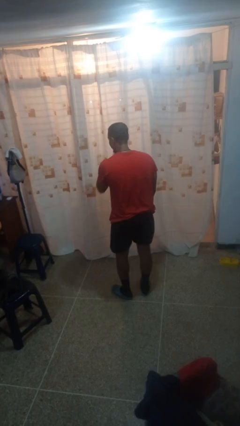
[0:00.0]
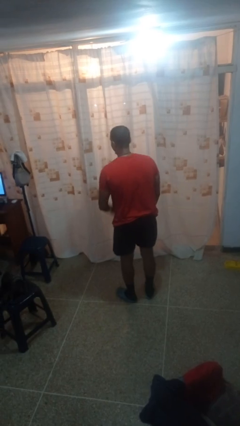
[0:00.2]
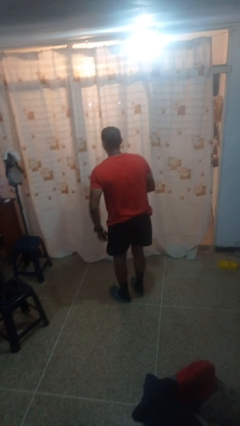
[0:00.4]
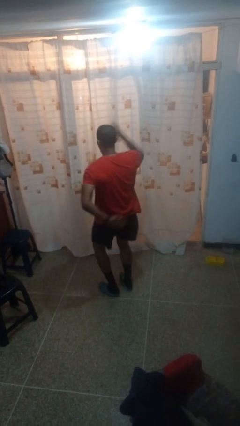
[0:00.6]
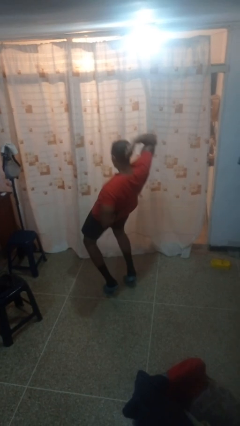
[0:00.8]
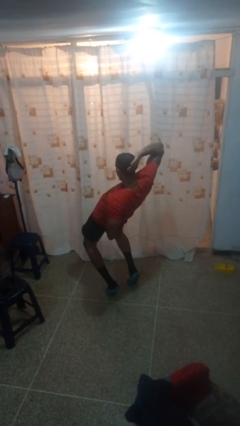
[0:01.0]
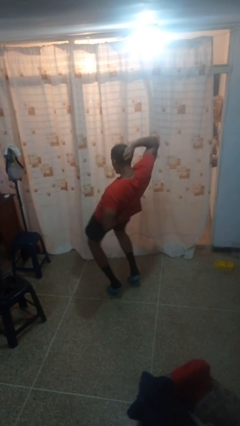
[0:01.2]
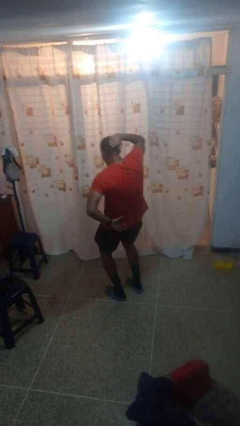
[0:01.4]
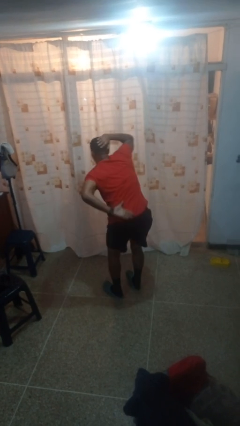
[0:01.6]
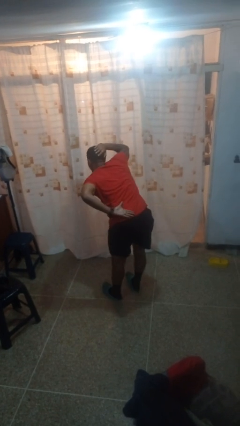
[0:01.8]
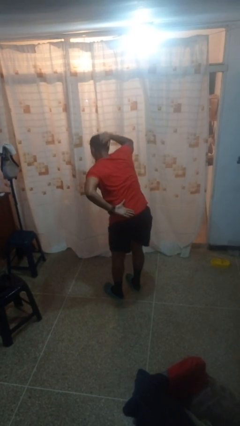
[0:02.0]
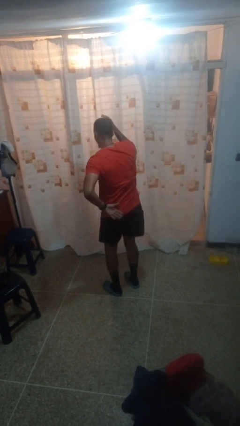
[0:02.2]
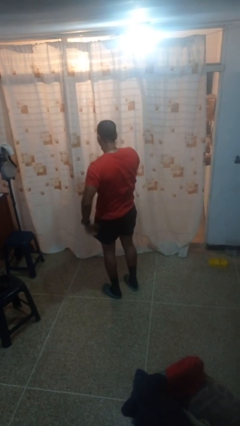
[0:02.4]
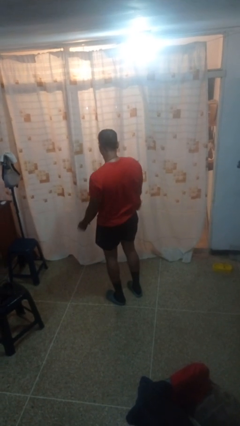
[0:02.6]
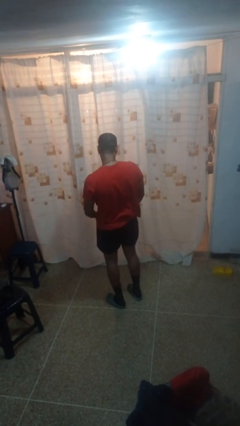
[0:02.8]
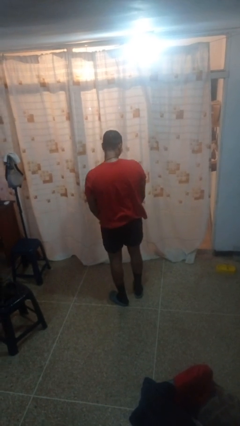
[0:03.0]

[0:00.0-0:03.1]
person wiggles hips

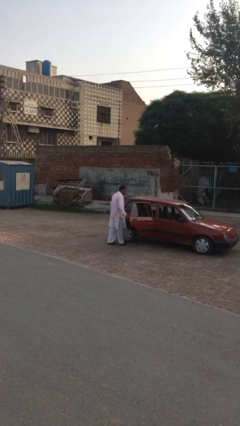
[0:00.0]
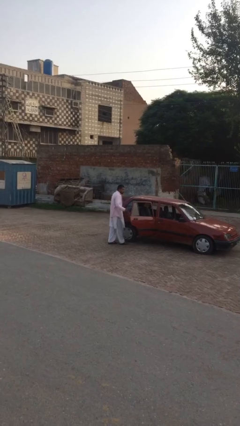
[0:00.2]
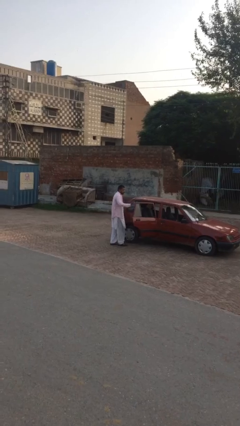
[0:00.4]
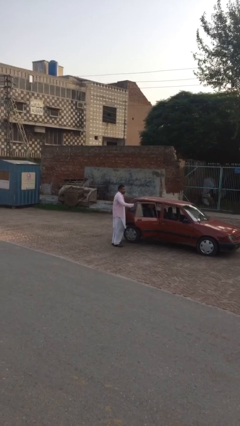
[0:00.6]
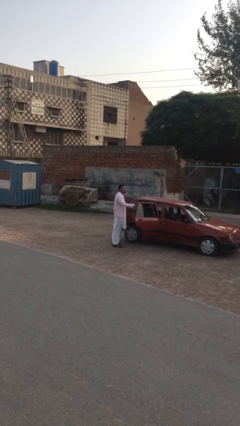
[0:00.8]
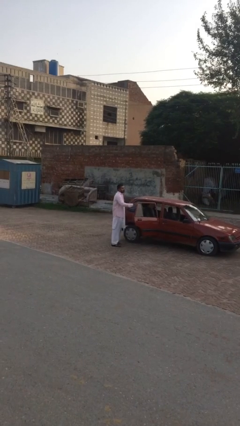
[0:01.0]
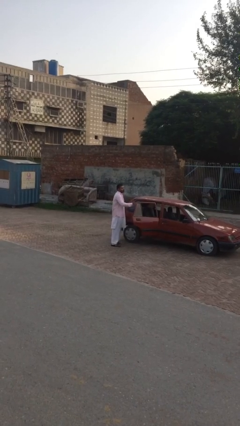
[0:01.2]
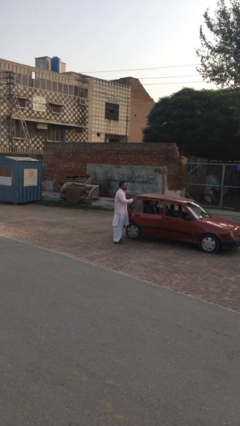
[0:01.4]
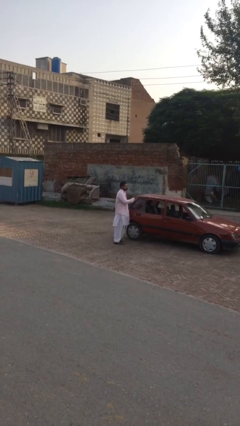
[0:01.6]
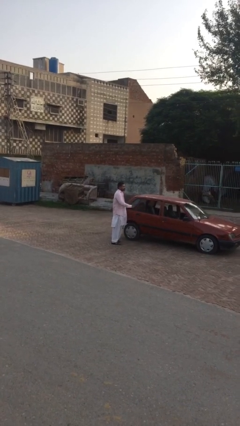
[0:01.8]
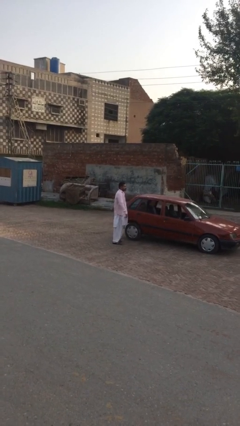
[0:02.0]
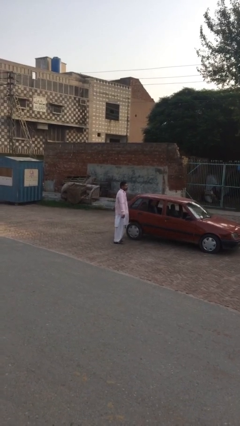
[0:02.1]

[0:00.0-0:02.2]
person closes car door

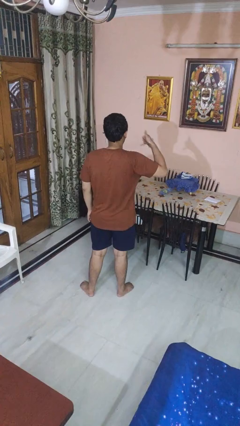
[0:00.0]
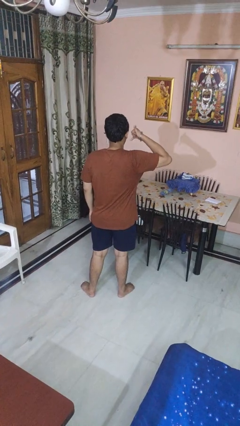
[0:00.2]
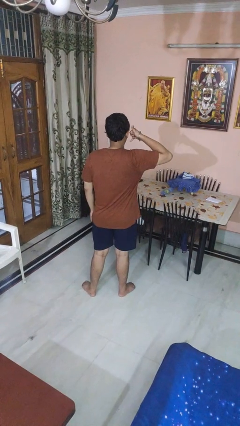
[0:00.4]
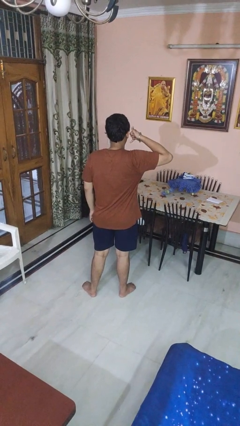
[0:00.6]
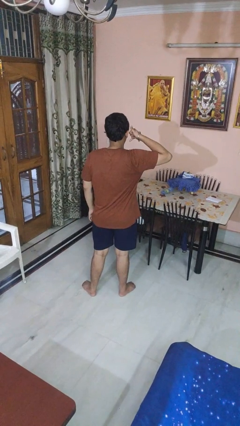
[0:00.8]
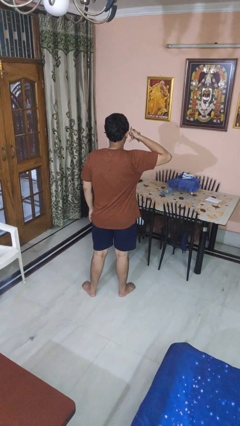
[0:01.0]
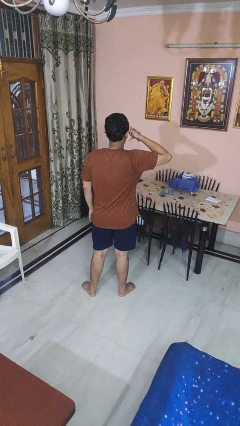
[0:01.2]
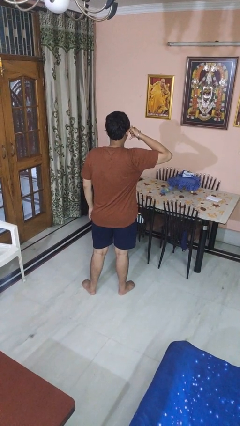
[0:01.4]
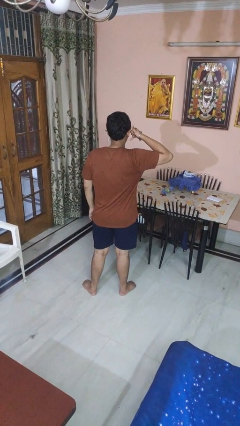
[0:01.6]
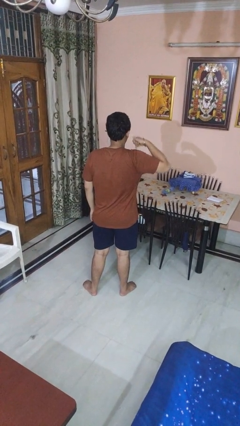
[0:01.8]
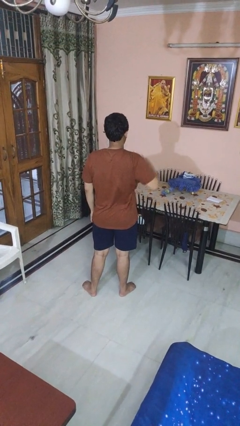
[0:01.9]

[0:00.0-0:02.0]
person gestures call me

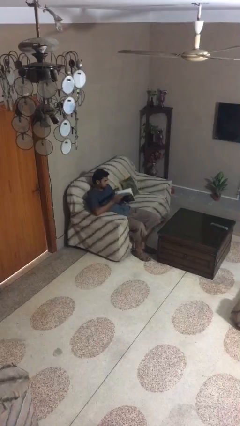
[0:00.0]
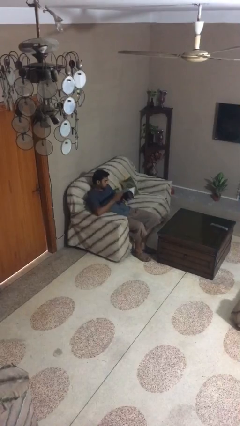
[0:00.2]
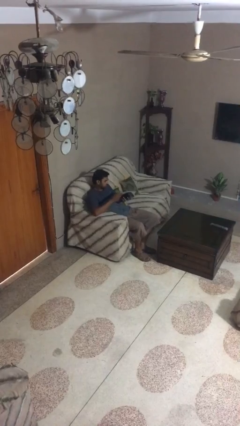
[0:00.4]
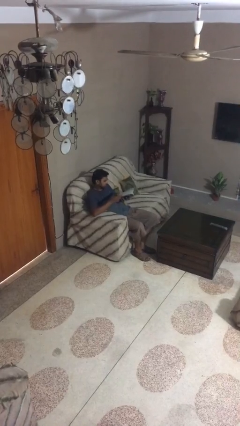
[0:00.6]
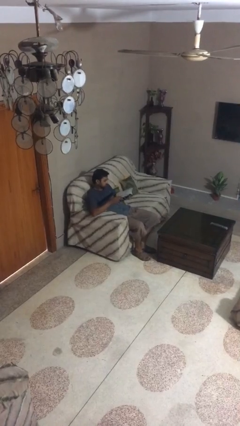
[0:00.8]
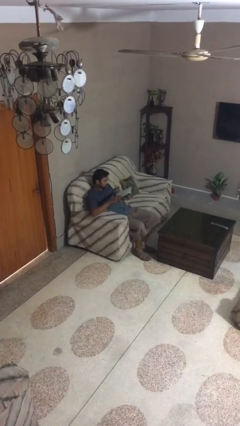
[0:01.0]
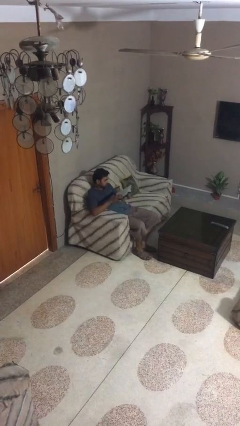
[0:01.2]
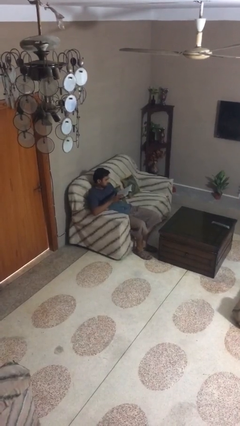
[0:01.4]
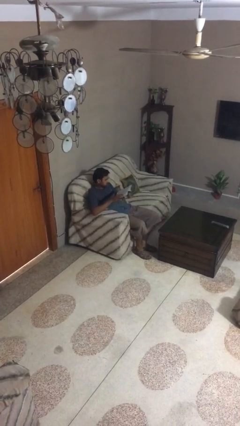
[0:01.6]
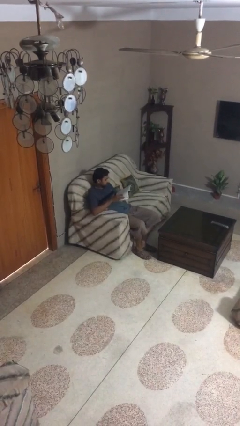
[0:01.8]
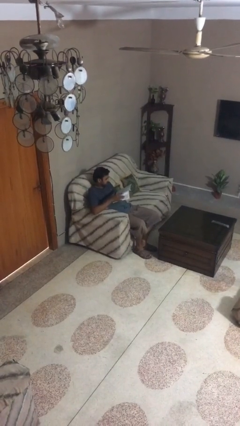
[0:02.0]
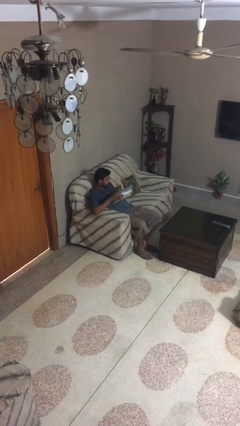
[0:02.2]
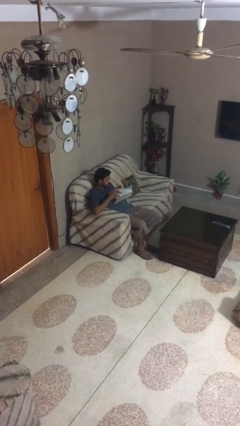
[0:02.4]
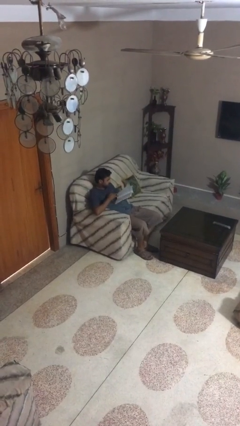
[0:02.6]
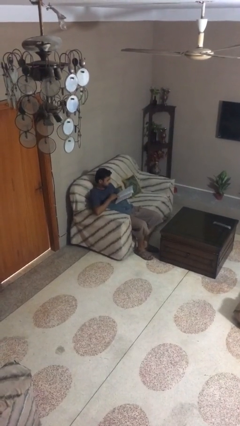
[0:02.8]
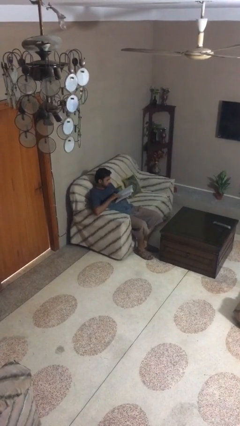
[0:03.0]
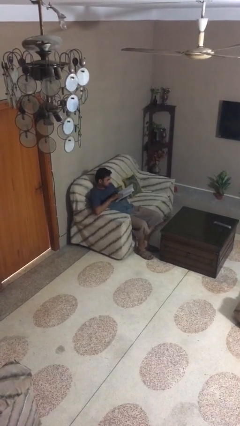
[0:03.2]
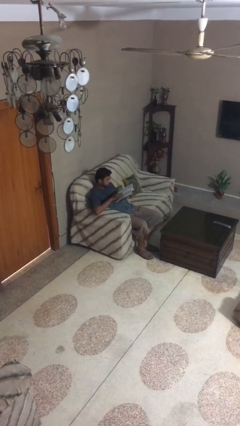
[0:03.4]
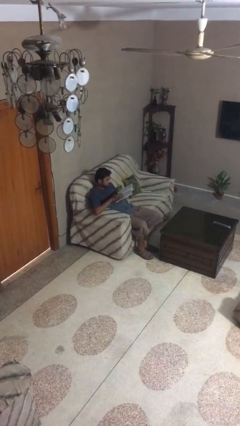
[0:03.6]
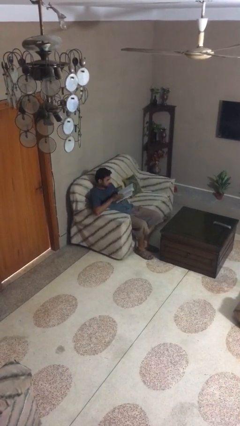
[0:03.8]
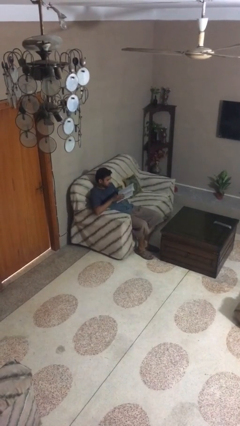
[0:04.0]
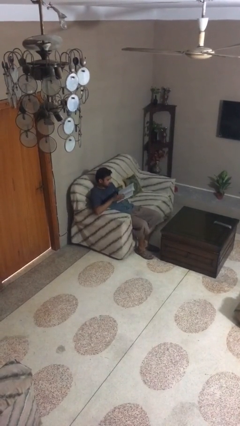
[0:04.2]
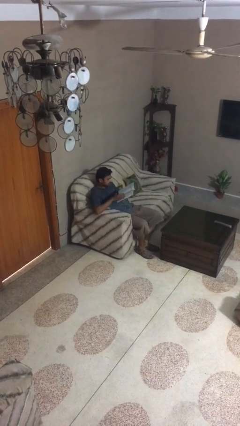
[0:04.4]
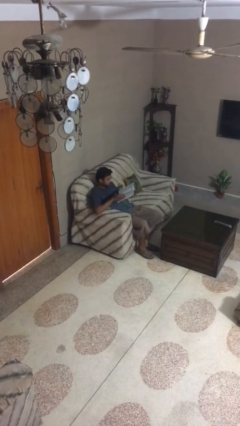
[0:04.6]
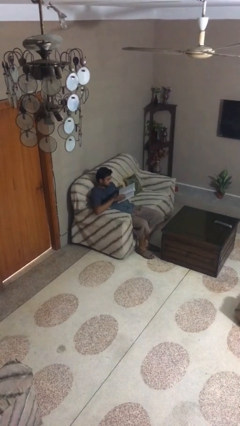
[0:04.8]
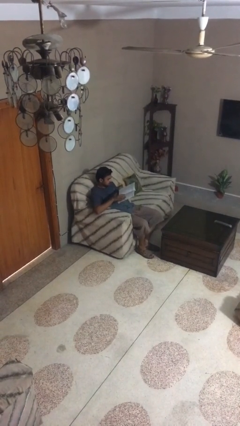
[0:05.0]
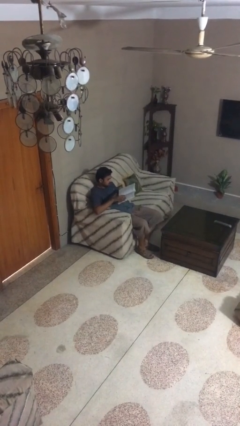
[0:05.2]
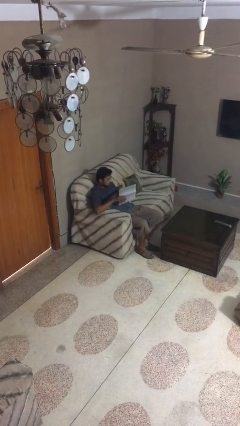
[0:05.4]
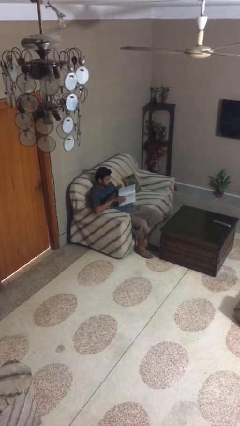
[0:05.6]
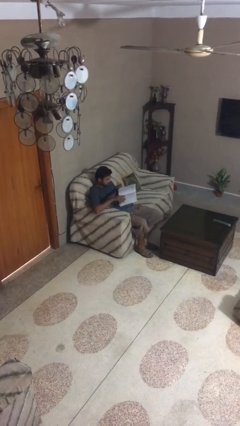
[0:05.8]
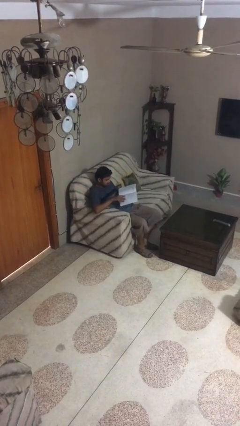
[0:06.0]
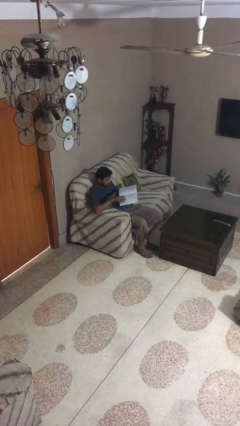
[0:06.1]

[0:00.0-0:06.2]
person reads document

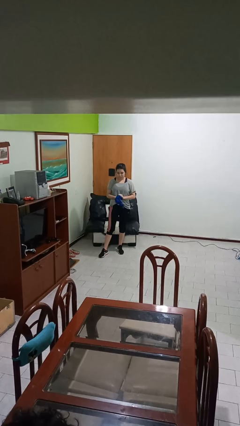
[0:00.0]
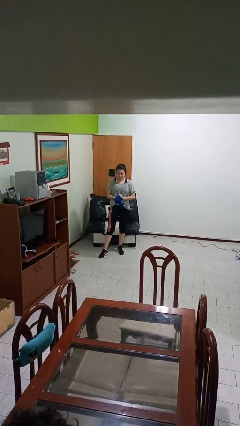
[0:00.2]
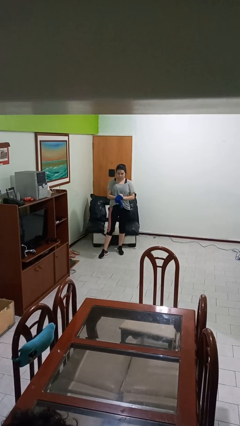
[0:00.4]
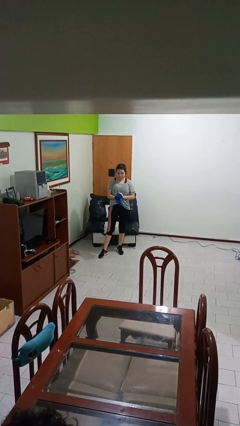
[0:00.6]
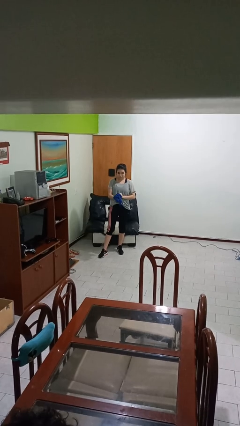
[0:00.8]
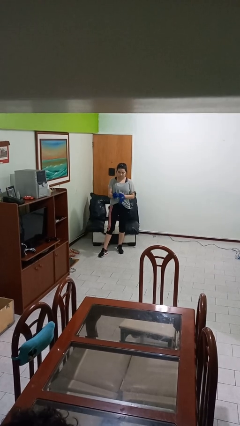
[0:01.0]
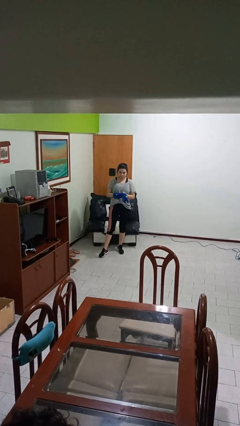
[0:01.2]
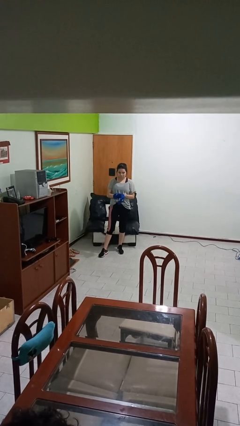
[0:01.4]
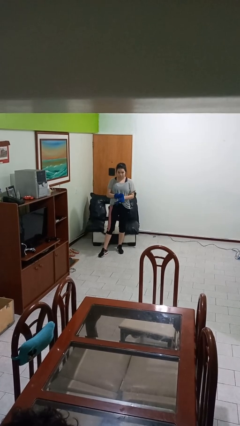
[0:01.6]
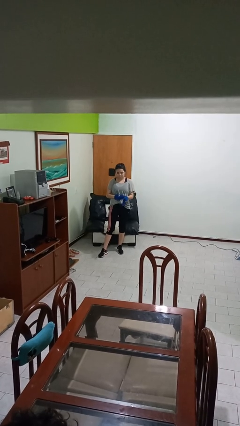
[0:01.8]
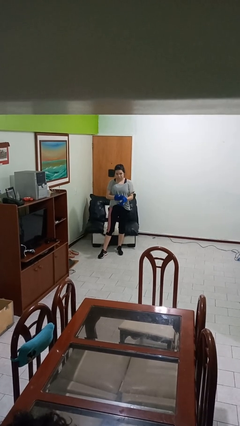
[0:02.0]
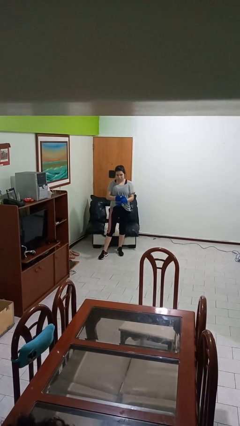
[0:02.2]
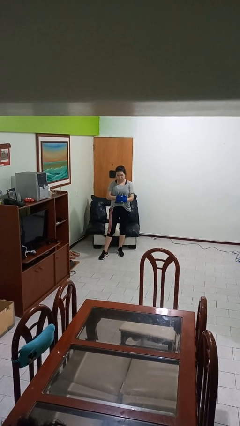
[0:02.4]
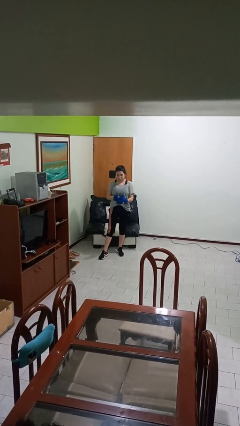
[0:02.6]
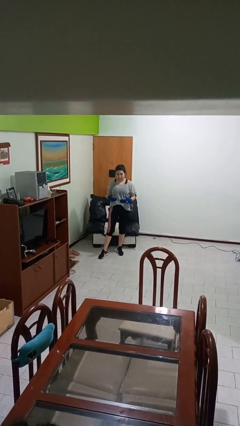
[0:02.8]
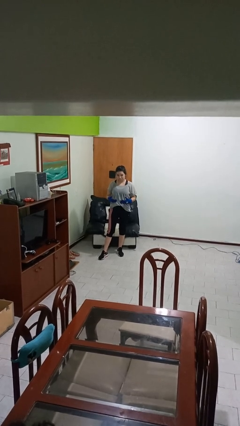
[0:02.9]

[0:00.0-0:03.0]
person puts on gloves

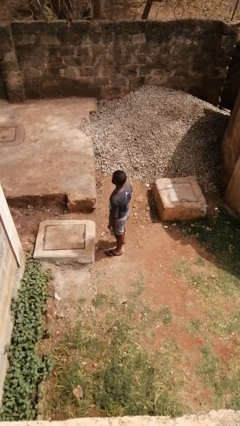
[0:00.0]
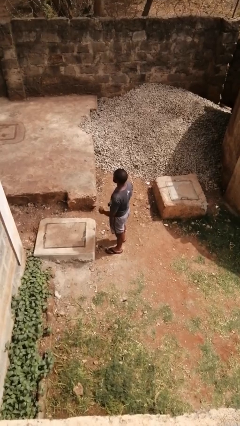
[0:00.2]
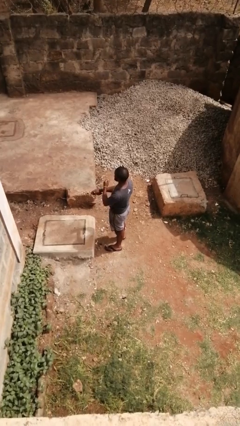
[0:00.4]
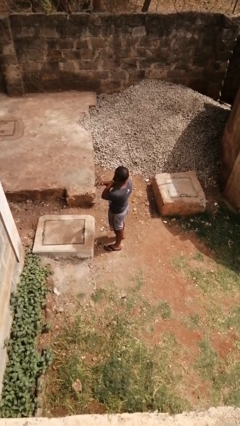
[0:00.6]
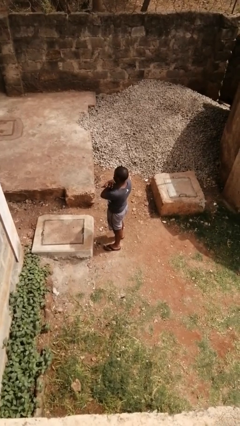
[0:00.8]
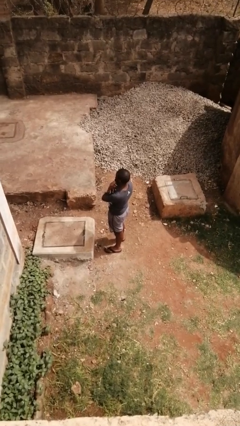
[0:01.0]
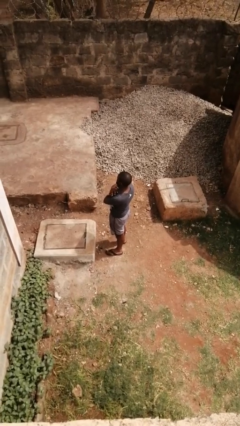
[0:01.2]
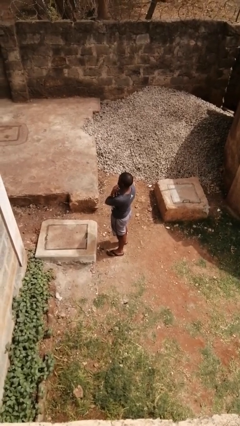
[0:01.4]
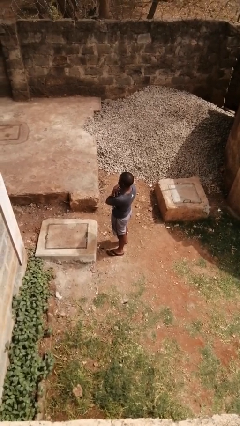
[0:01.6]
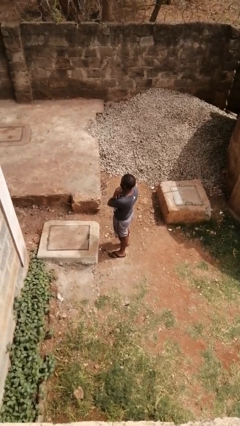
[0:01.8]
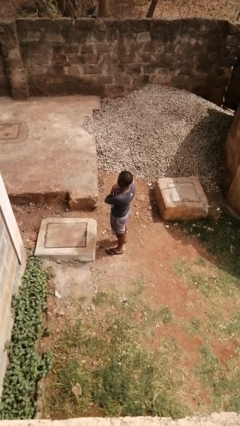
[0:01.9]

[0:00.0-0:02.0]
person gestures arms x
